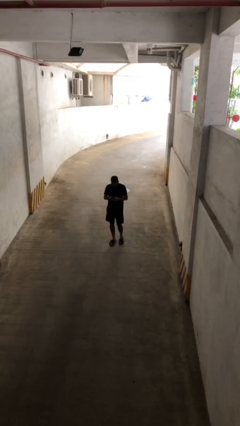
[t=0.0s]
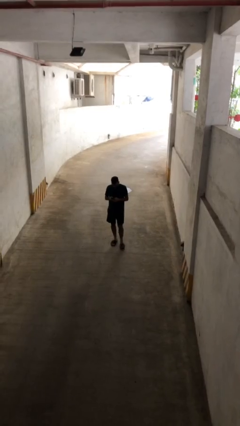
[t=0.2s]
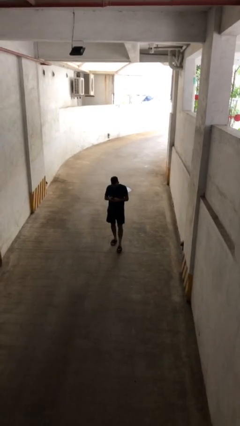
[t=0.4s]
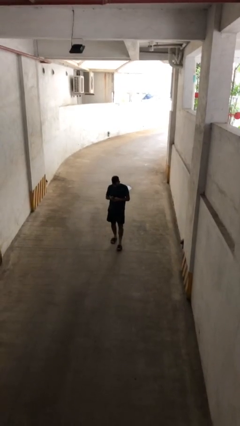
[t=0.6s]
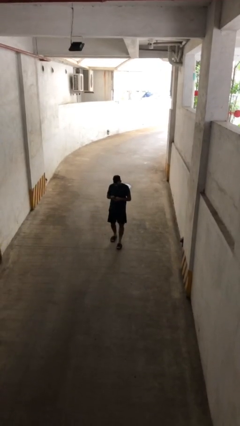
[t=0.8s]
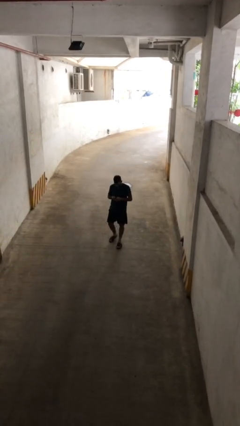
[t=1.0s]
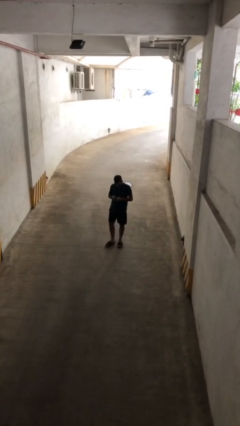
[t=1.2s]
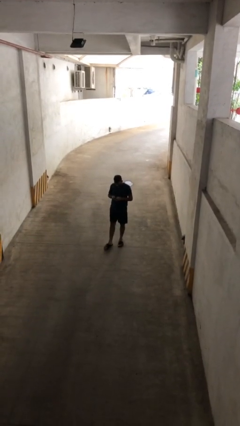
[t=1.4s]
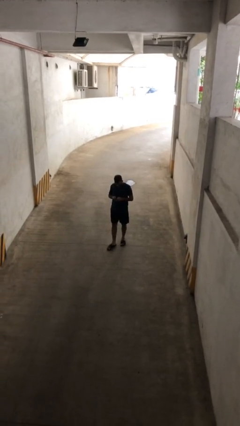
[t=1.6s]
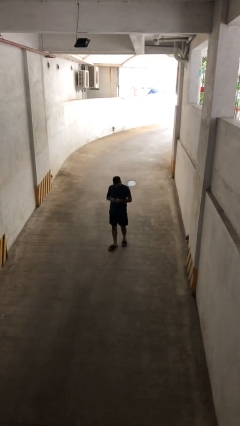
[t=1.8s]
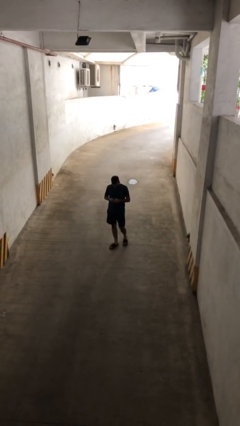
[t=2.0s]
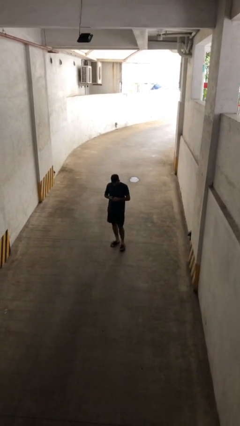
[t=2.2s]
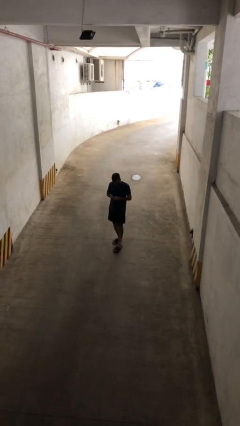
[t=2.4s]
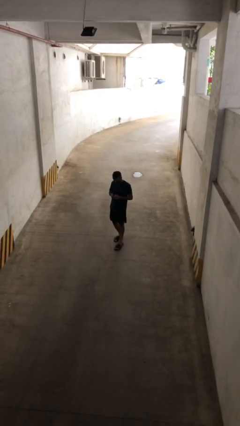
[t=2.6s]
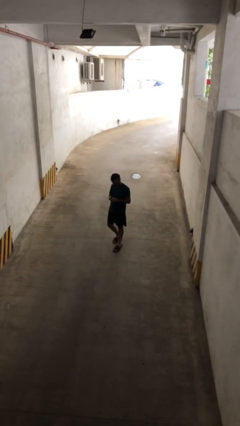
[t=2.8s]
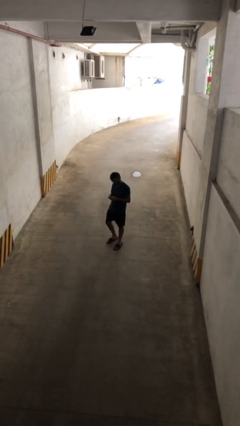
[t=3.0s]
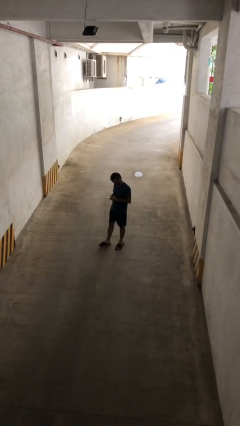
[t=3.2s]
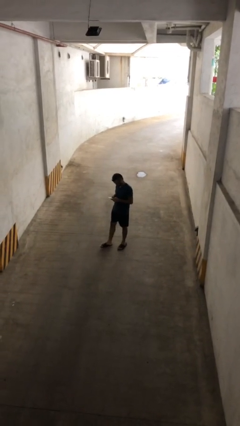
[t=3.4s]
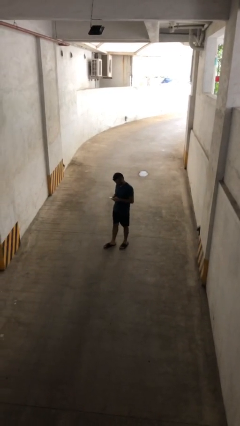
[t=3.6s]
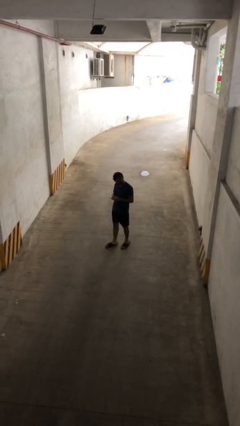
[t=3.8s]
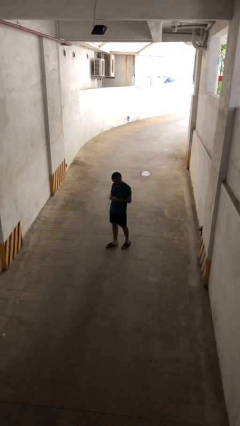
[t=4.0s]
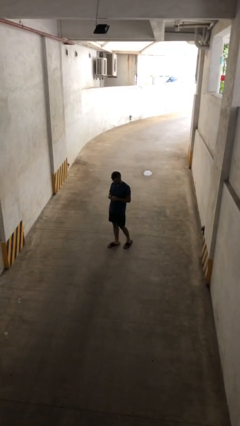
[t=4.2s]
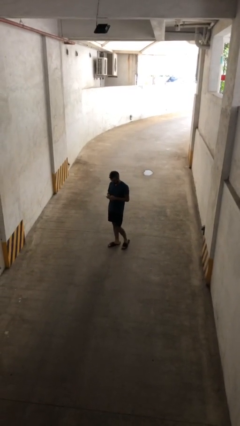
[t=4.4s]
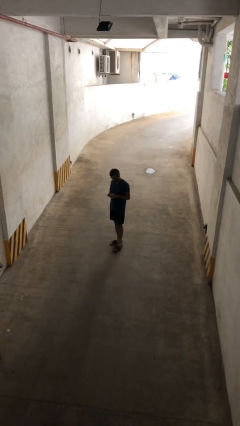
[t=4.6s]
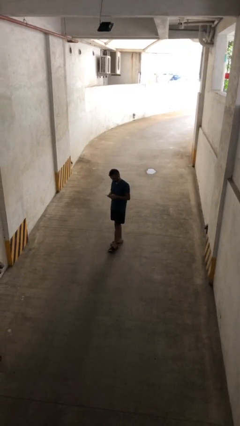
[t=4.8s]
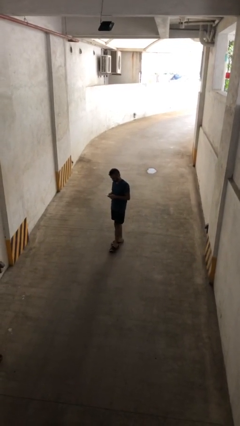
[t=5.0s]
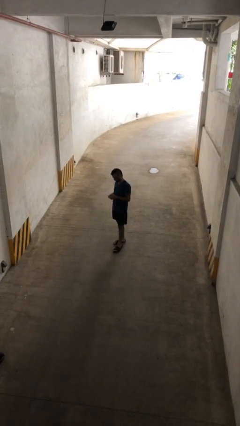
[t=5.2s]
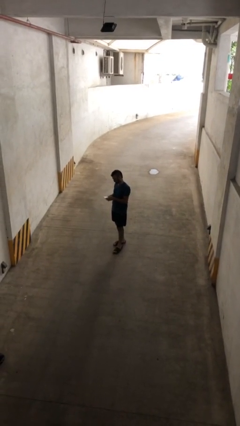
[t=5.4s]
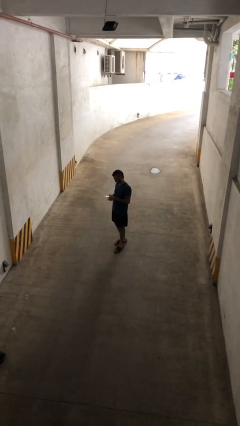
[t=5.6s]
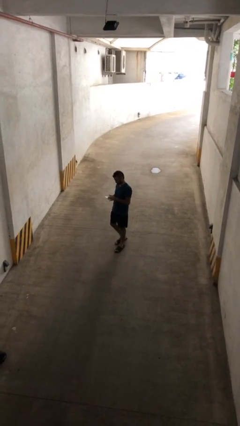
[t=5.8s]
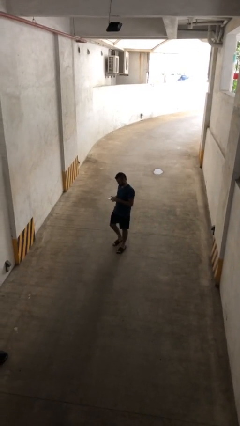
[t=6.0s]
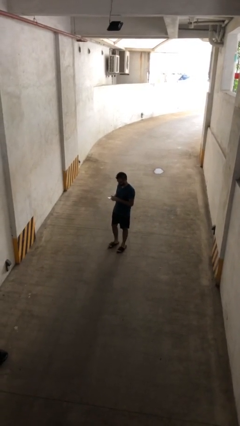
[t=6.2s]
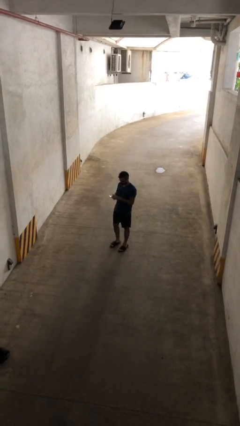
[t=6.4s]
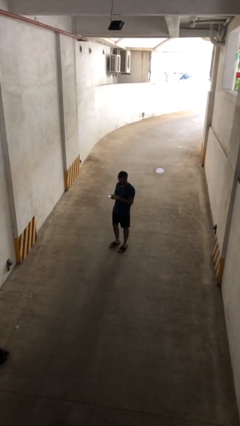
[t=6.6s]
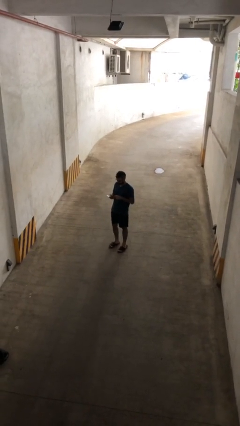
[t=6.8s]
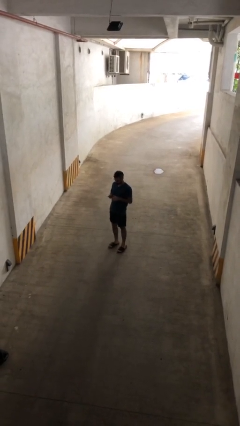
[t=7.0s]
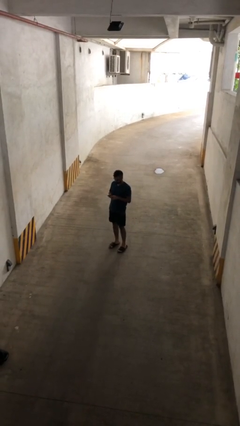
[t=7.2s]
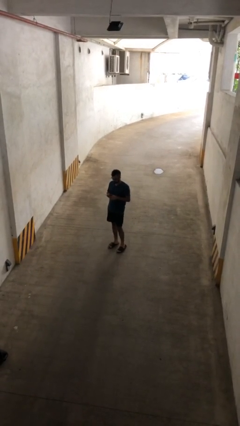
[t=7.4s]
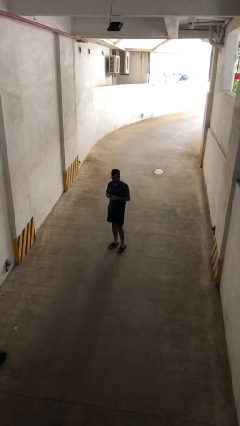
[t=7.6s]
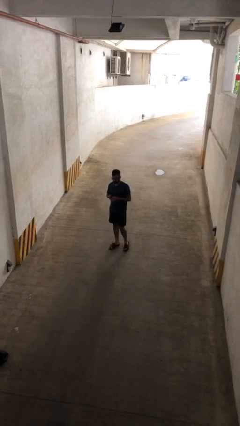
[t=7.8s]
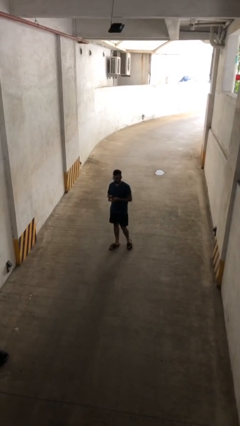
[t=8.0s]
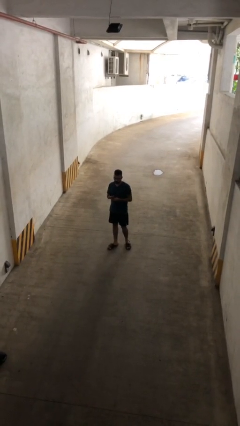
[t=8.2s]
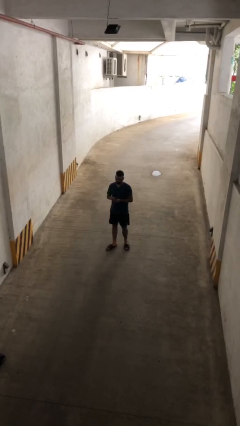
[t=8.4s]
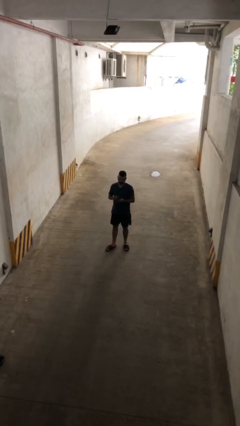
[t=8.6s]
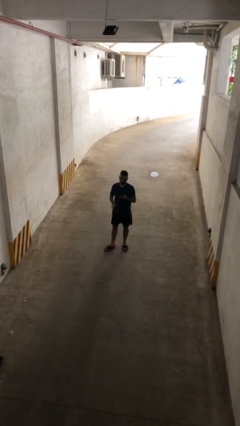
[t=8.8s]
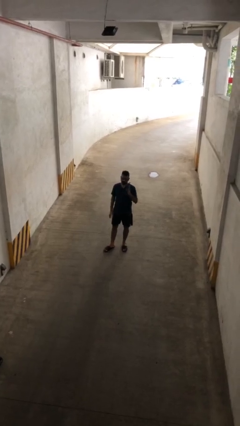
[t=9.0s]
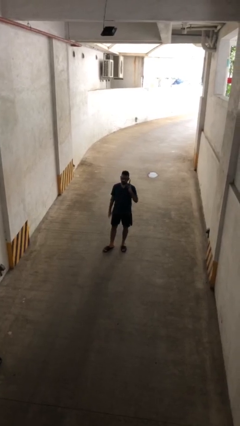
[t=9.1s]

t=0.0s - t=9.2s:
person texts on phone

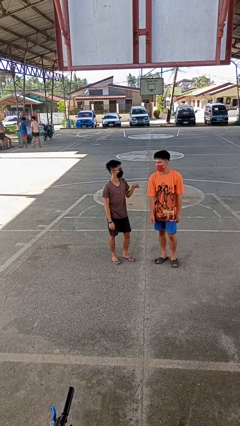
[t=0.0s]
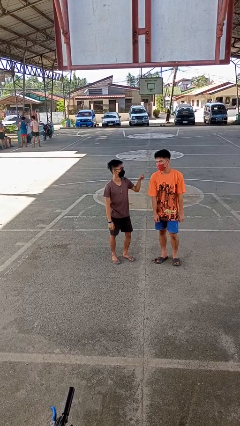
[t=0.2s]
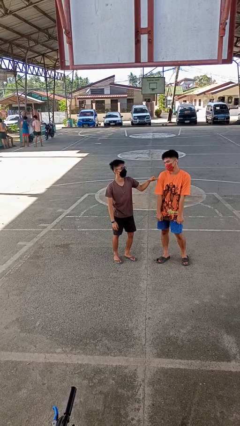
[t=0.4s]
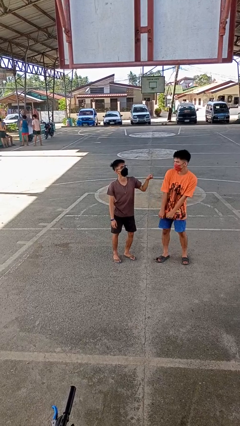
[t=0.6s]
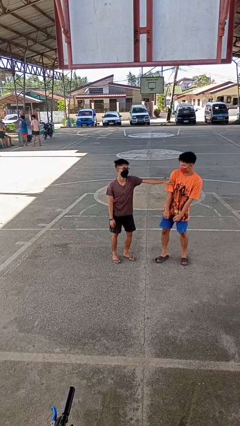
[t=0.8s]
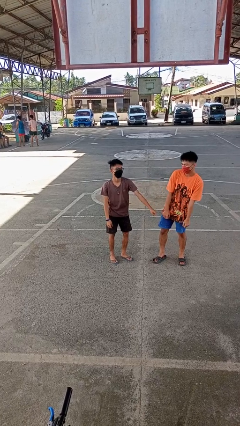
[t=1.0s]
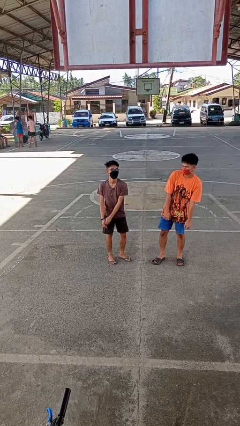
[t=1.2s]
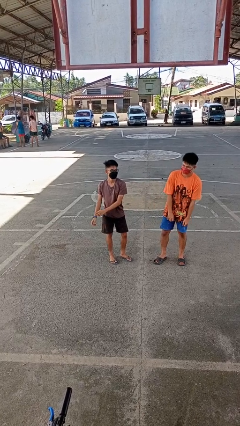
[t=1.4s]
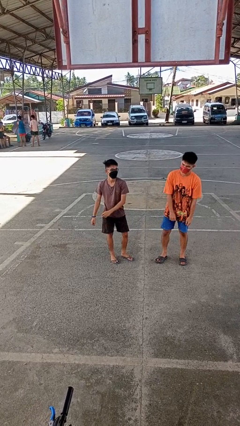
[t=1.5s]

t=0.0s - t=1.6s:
person pounds shoulders of person

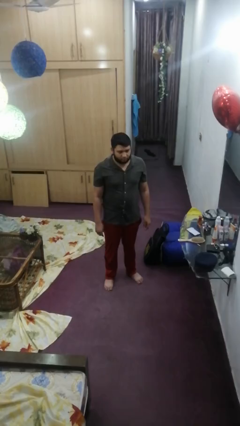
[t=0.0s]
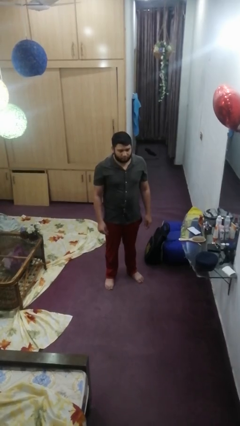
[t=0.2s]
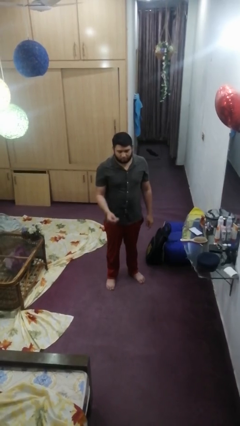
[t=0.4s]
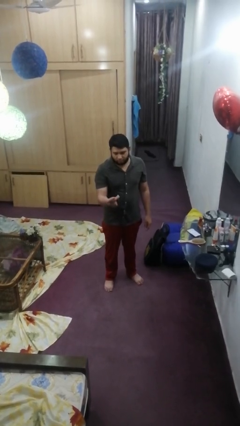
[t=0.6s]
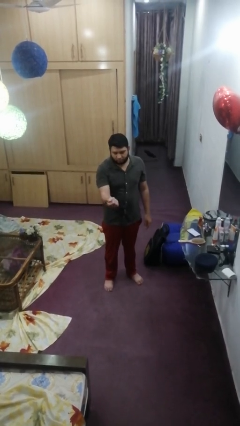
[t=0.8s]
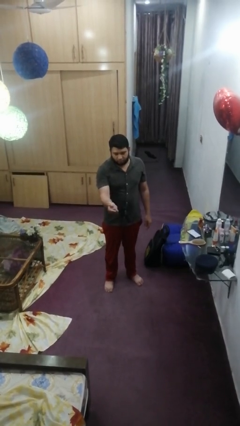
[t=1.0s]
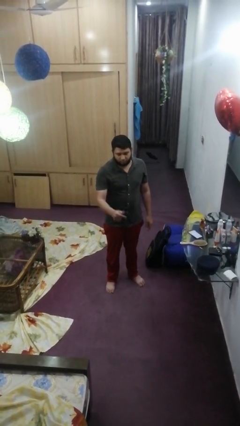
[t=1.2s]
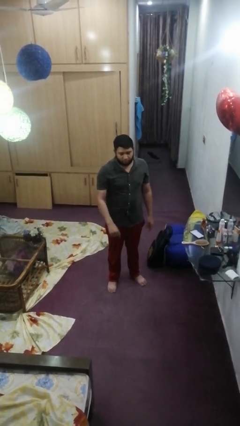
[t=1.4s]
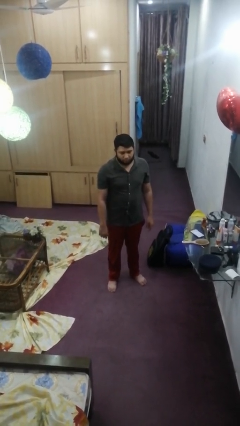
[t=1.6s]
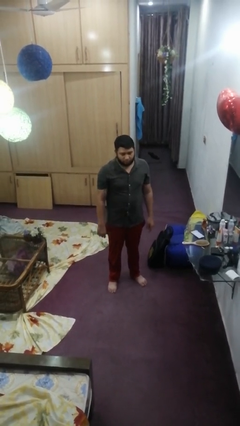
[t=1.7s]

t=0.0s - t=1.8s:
person snaps fingers

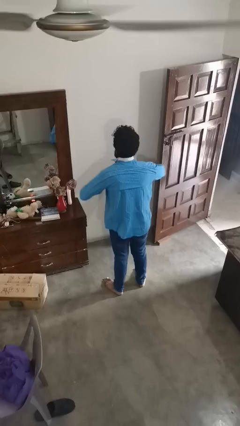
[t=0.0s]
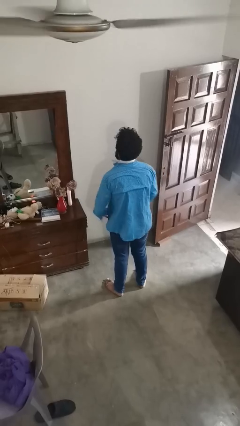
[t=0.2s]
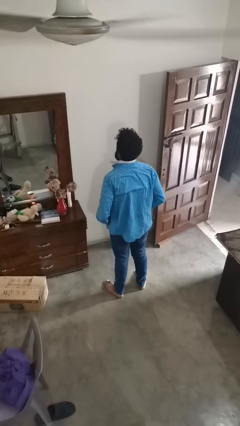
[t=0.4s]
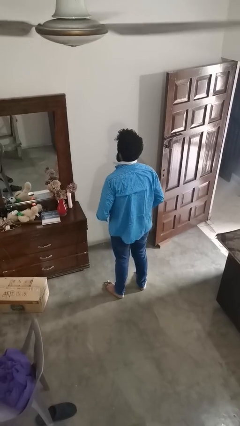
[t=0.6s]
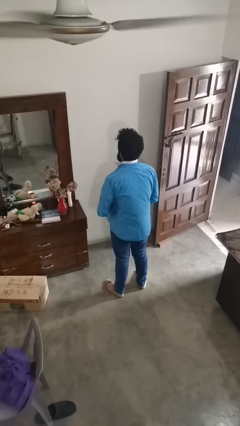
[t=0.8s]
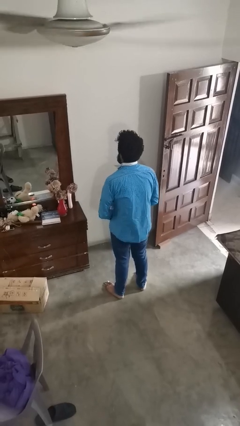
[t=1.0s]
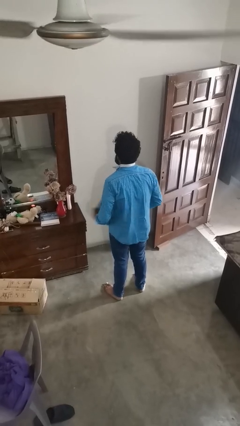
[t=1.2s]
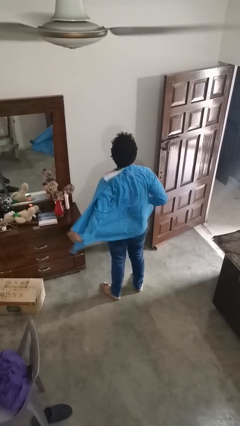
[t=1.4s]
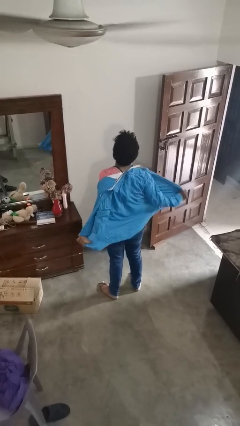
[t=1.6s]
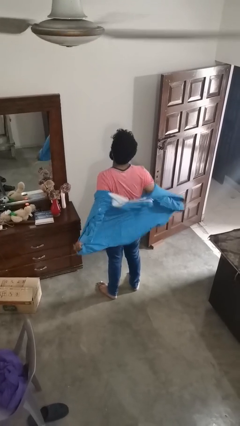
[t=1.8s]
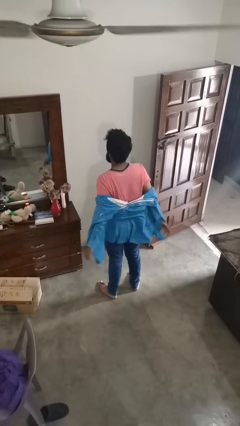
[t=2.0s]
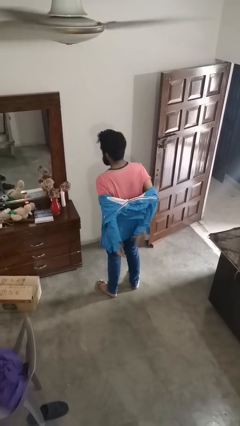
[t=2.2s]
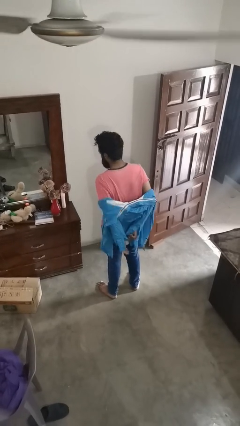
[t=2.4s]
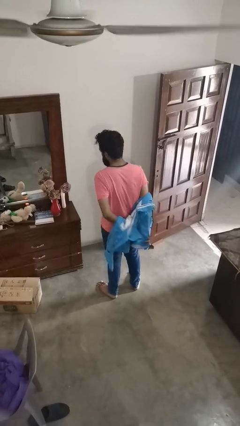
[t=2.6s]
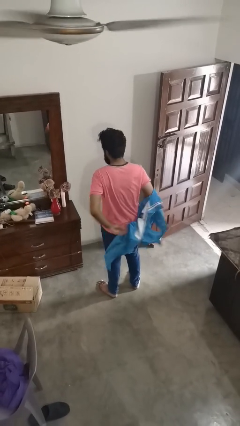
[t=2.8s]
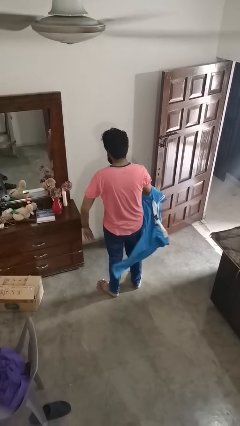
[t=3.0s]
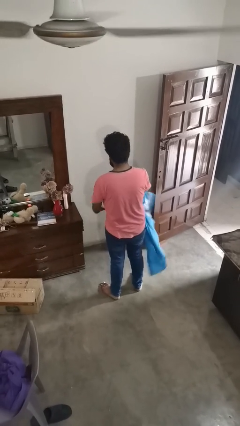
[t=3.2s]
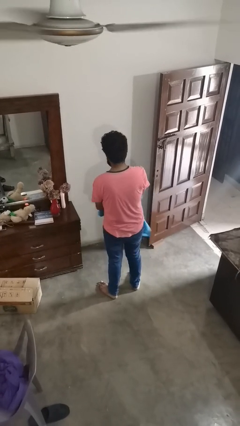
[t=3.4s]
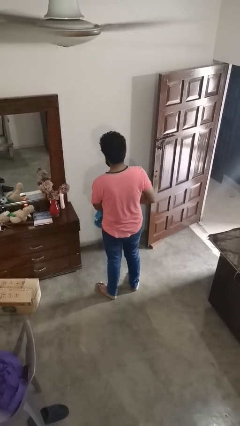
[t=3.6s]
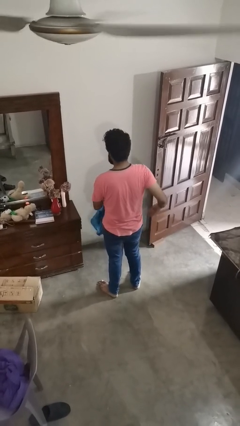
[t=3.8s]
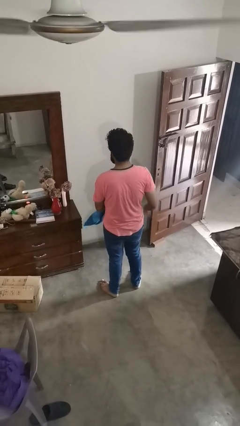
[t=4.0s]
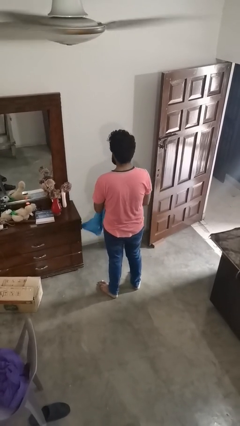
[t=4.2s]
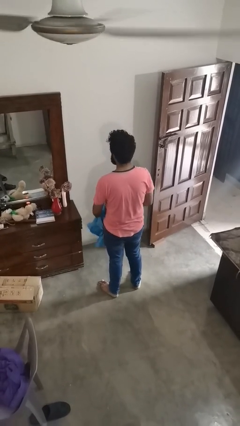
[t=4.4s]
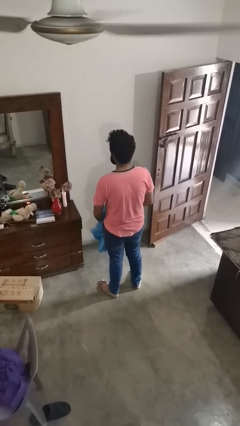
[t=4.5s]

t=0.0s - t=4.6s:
person takes off shirt

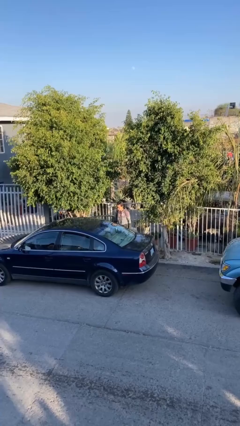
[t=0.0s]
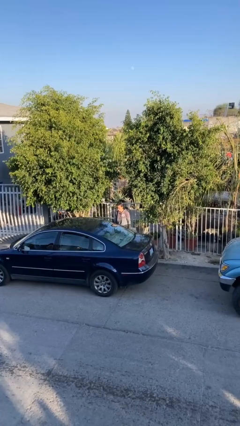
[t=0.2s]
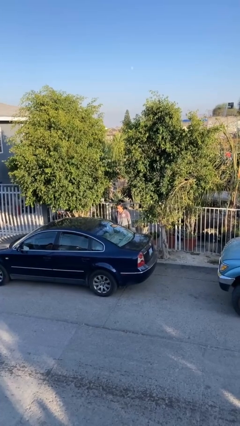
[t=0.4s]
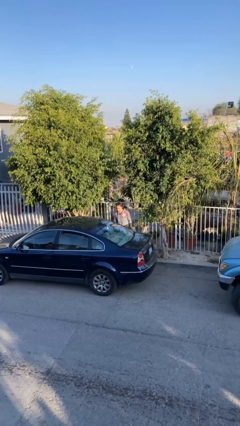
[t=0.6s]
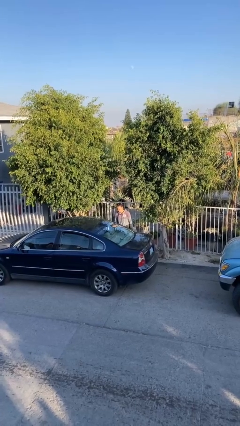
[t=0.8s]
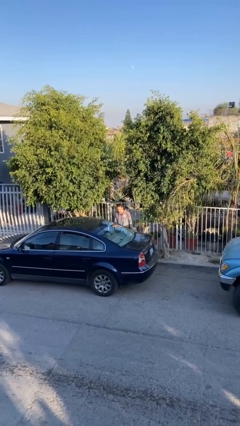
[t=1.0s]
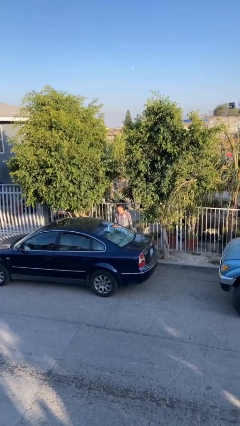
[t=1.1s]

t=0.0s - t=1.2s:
person closes car door
